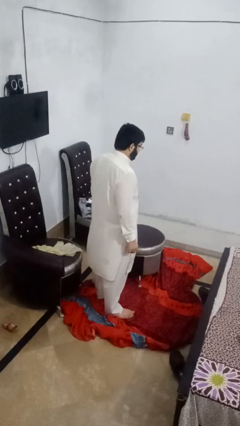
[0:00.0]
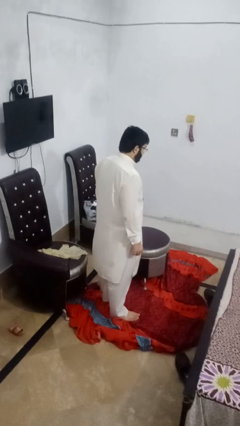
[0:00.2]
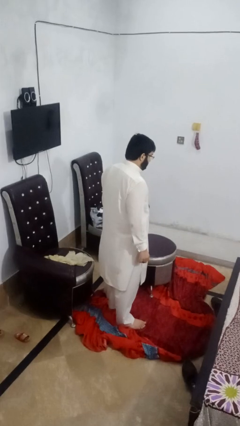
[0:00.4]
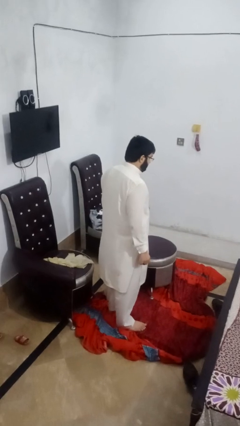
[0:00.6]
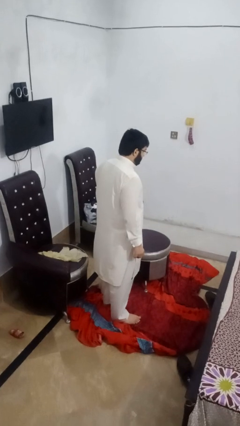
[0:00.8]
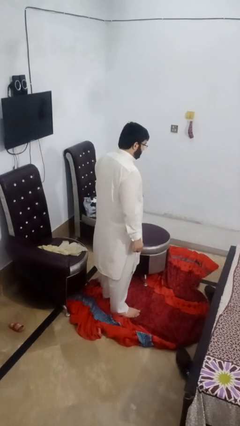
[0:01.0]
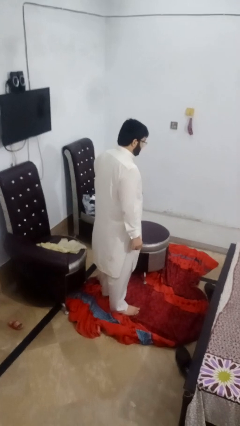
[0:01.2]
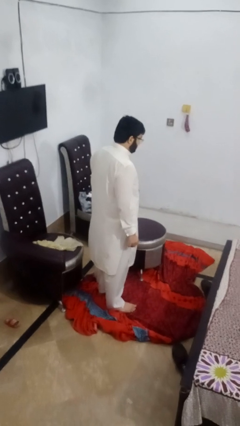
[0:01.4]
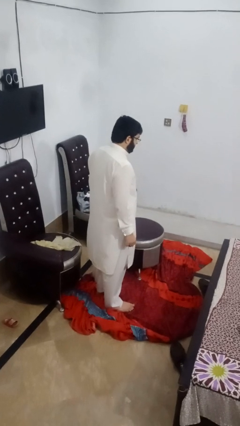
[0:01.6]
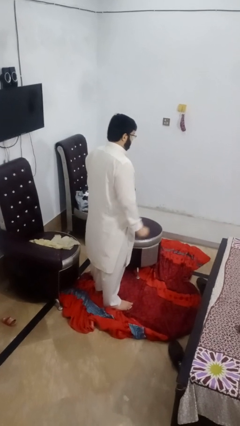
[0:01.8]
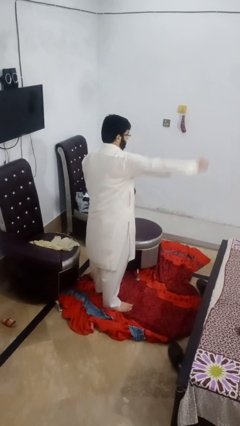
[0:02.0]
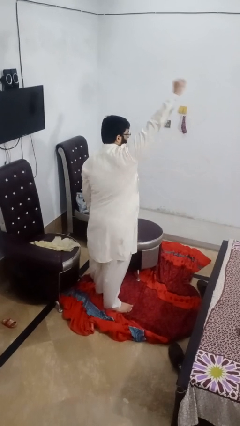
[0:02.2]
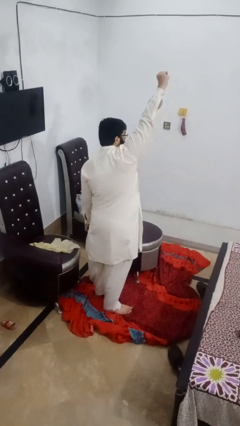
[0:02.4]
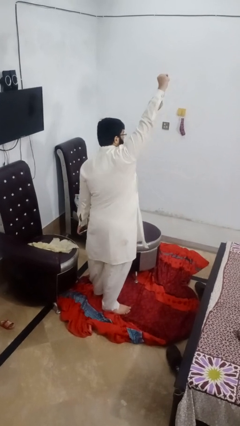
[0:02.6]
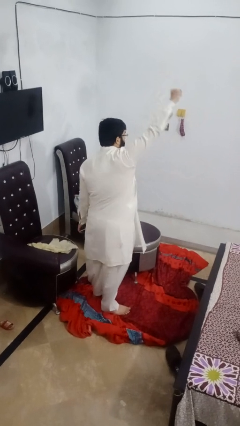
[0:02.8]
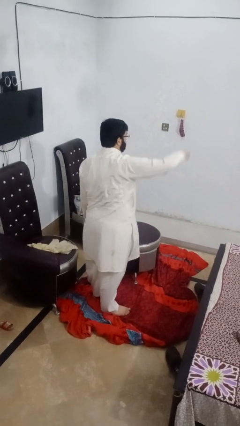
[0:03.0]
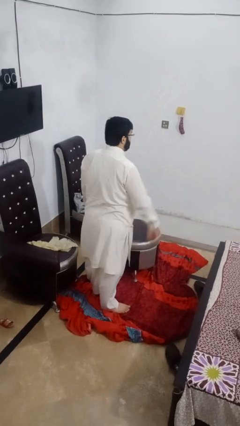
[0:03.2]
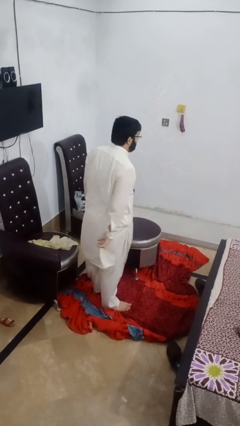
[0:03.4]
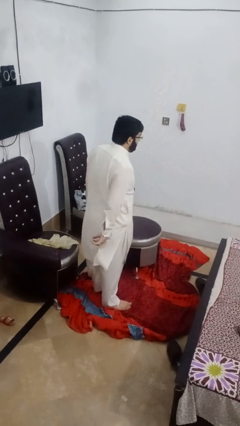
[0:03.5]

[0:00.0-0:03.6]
person punches

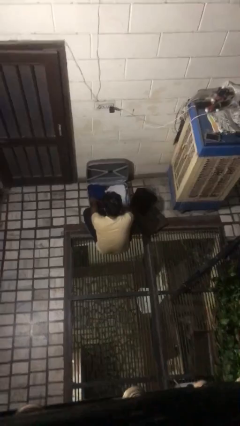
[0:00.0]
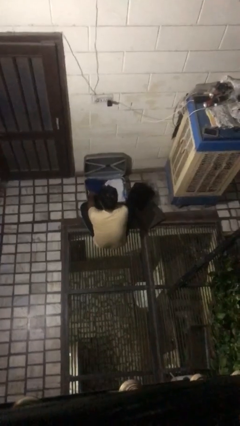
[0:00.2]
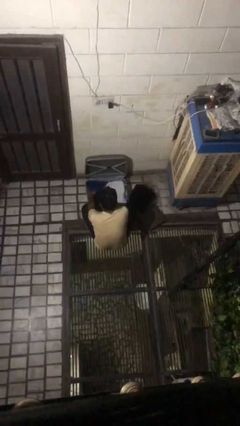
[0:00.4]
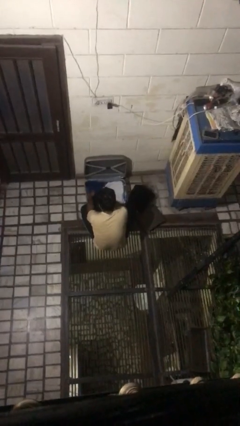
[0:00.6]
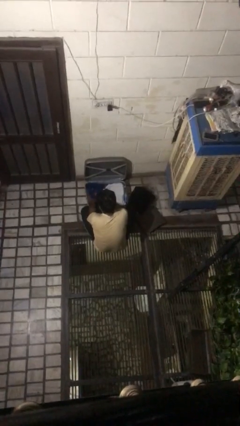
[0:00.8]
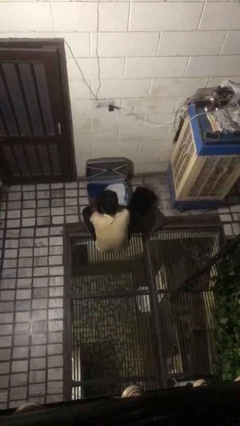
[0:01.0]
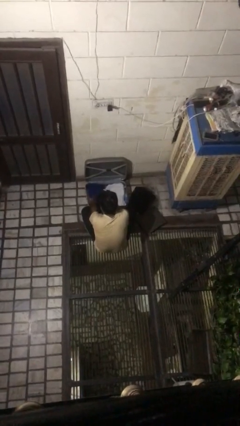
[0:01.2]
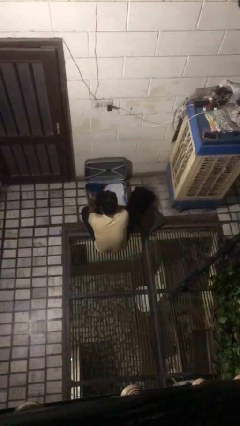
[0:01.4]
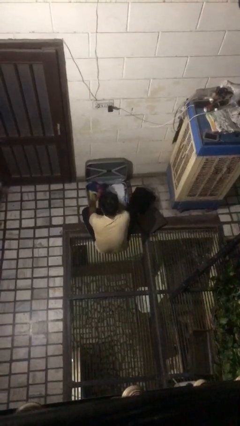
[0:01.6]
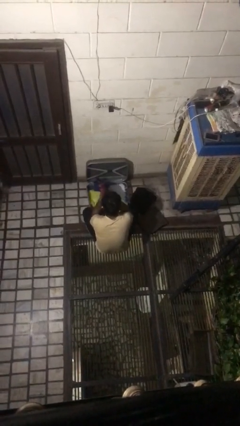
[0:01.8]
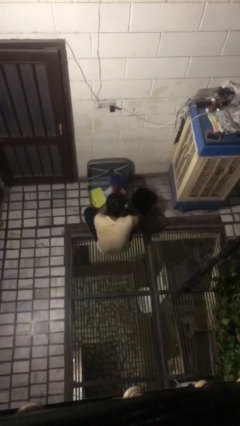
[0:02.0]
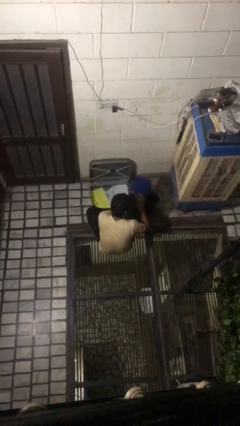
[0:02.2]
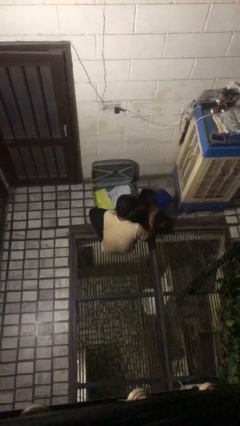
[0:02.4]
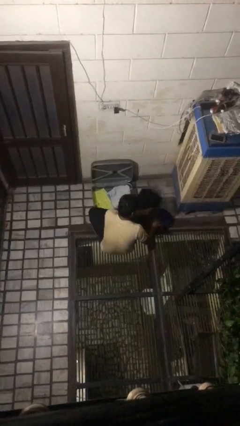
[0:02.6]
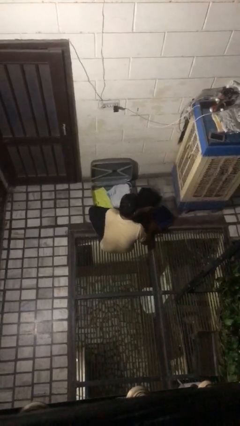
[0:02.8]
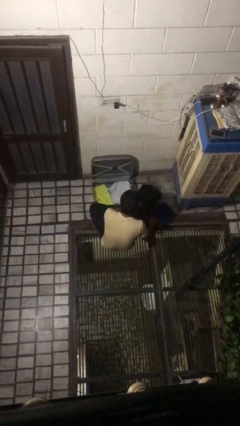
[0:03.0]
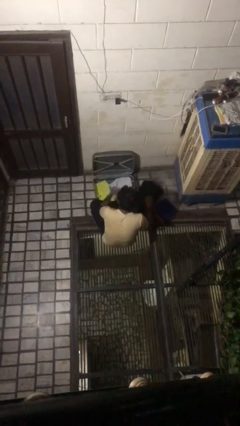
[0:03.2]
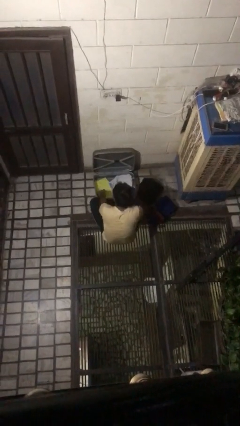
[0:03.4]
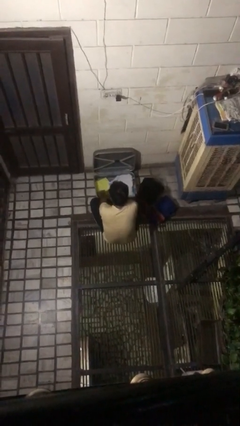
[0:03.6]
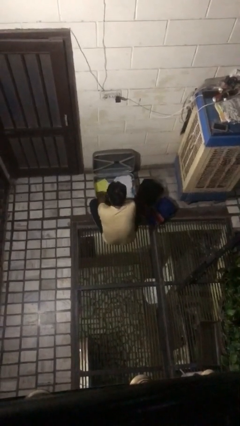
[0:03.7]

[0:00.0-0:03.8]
person unloads clothes from suitcase

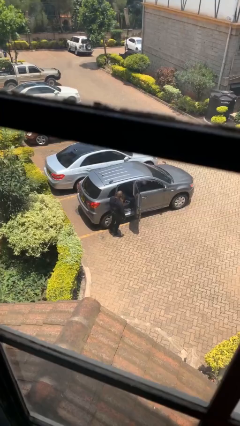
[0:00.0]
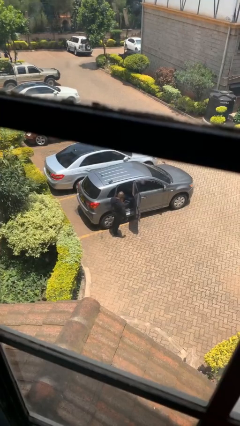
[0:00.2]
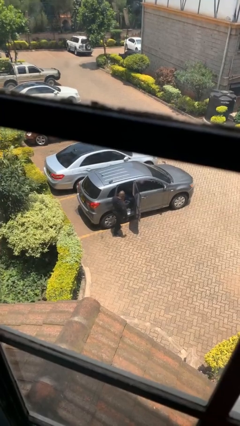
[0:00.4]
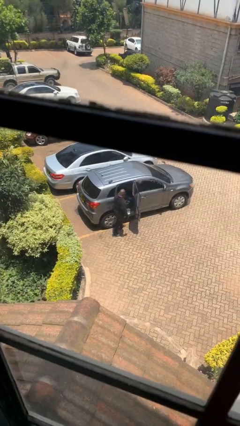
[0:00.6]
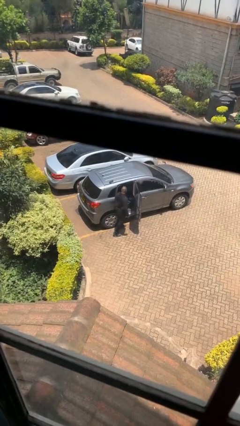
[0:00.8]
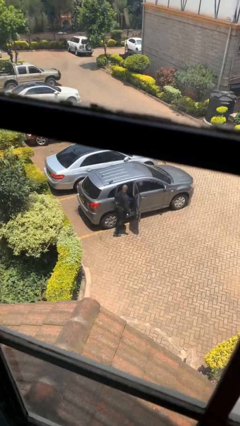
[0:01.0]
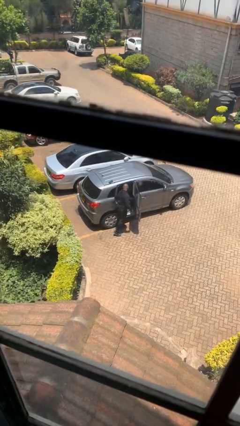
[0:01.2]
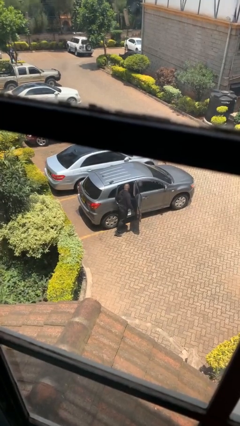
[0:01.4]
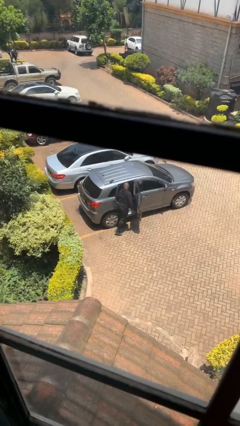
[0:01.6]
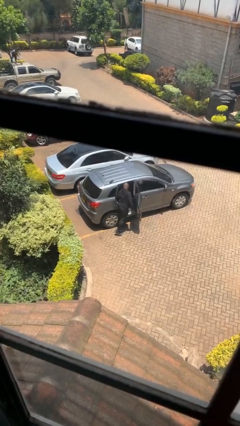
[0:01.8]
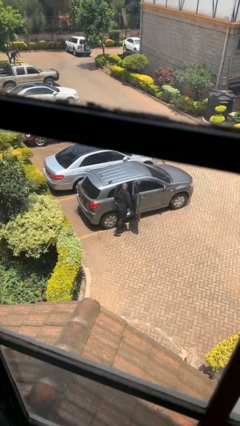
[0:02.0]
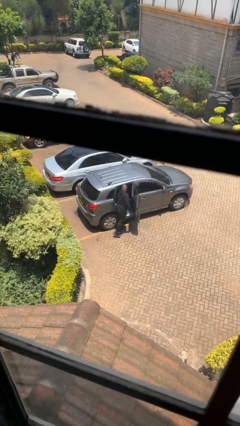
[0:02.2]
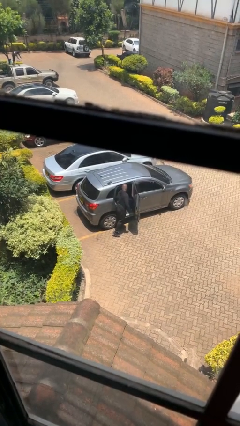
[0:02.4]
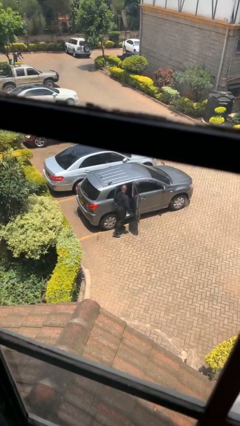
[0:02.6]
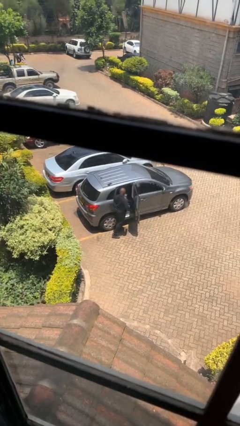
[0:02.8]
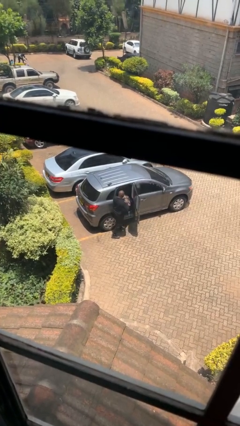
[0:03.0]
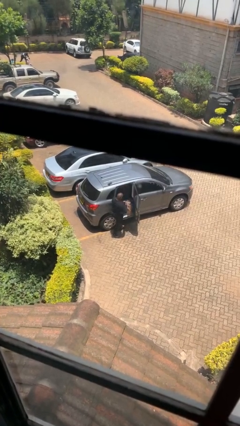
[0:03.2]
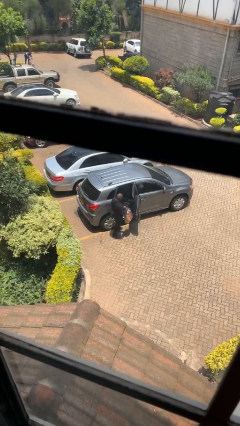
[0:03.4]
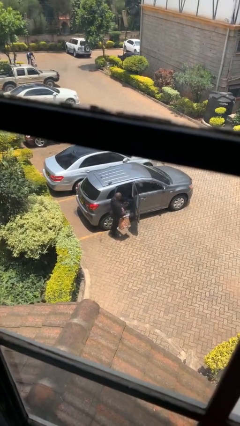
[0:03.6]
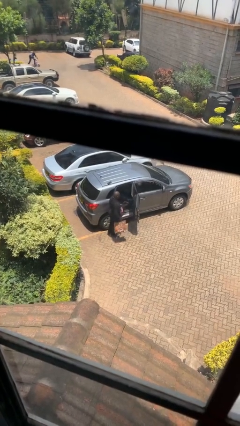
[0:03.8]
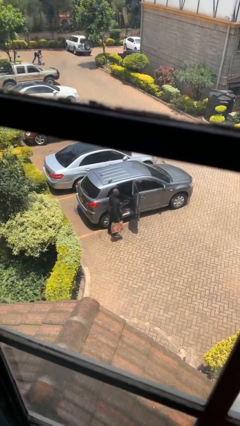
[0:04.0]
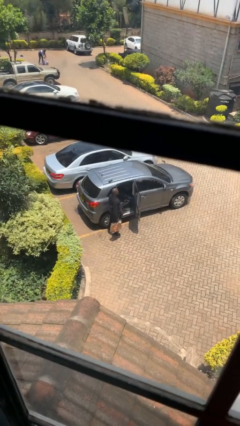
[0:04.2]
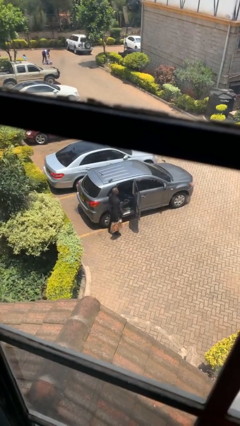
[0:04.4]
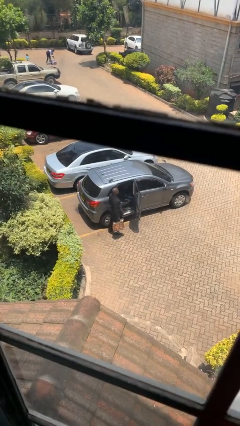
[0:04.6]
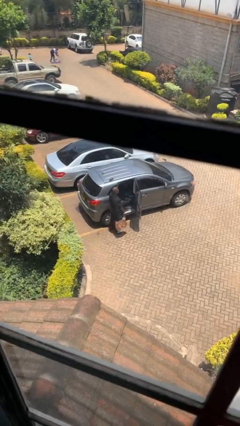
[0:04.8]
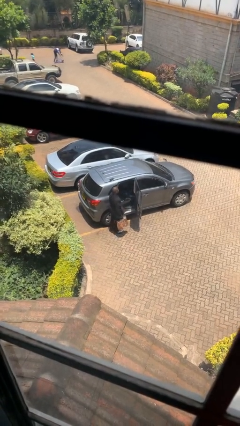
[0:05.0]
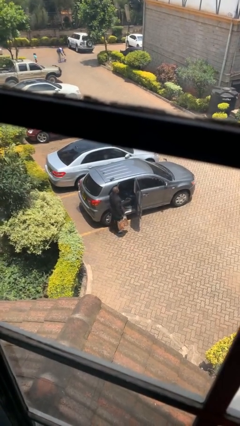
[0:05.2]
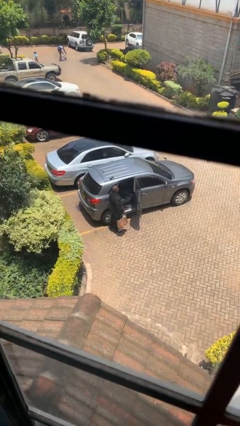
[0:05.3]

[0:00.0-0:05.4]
person unloads car

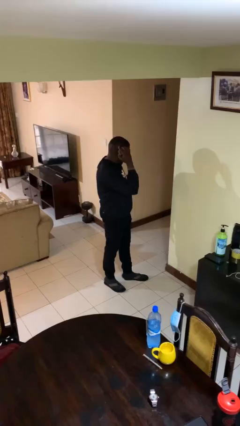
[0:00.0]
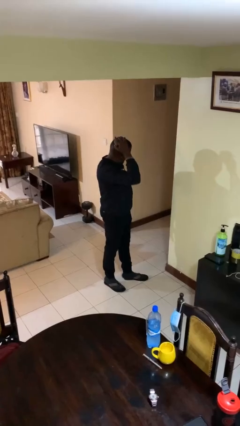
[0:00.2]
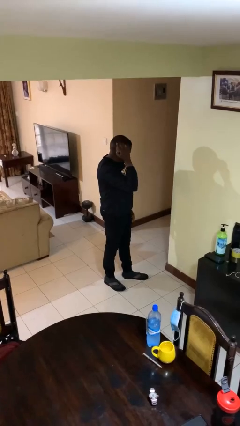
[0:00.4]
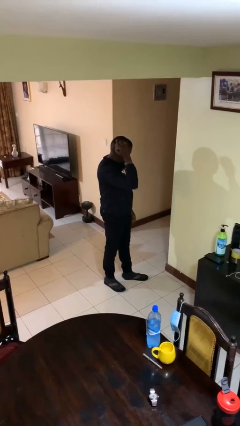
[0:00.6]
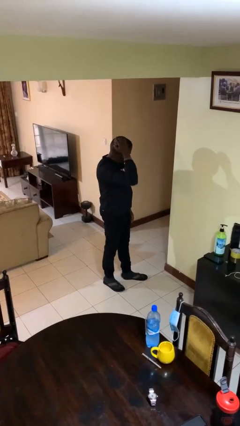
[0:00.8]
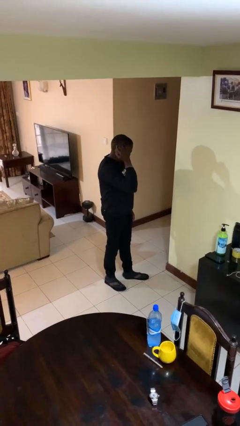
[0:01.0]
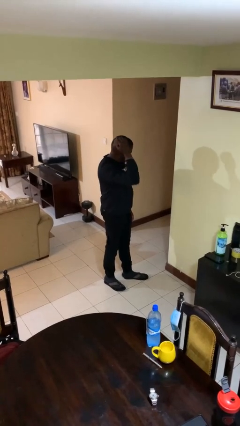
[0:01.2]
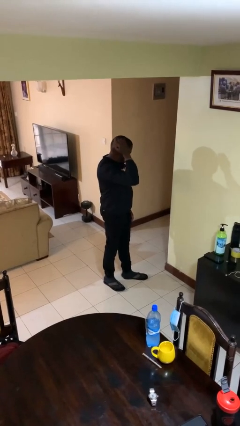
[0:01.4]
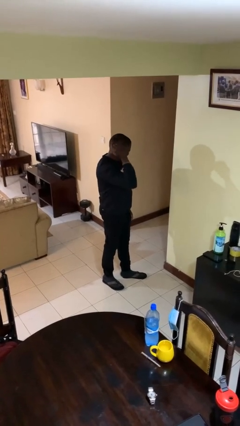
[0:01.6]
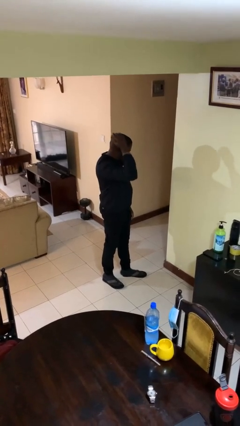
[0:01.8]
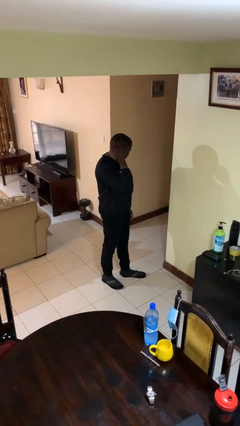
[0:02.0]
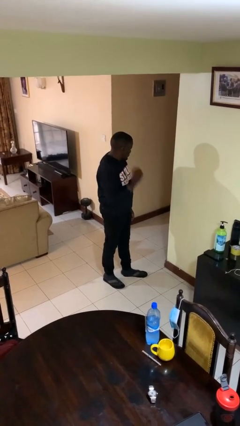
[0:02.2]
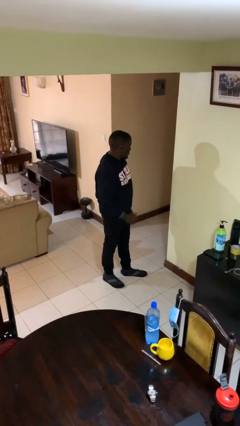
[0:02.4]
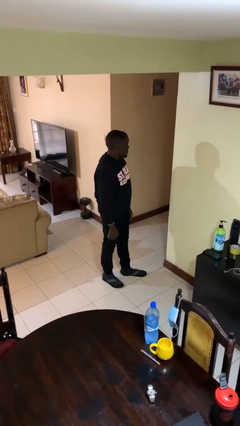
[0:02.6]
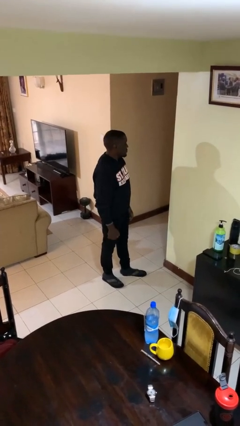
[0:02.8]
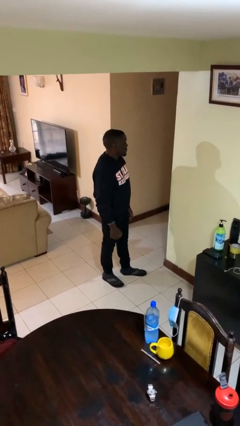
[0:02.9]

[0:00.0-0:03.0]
person brushes hair

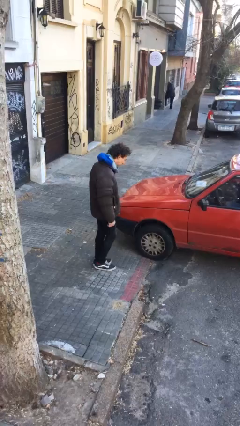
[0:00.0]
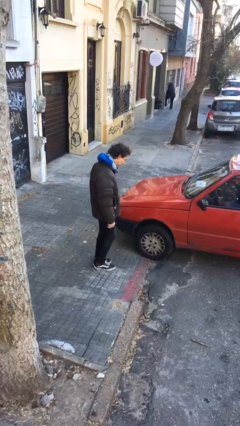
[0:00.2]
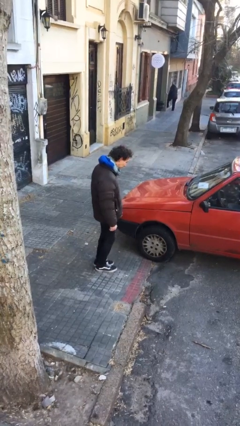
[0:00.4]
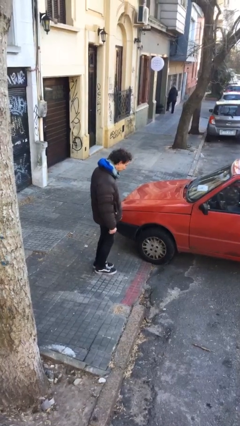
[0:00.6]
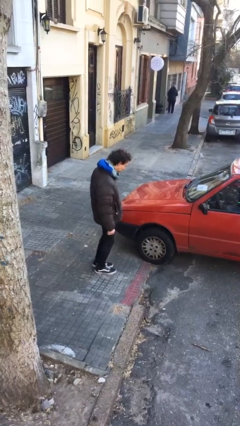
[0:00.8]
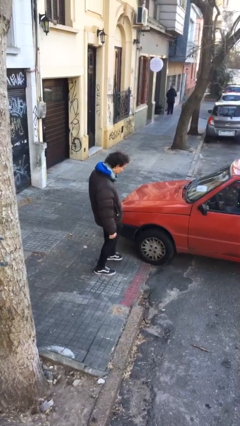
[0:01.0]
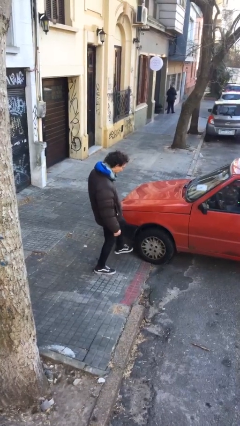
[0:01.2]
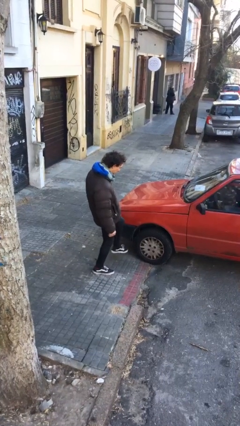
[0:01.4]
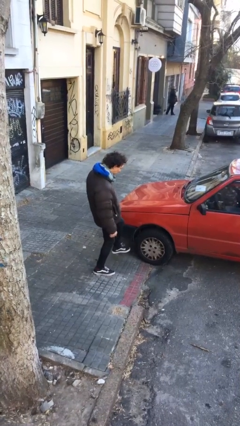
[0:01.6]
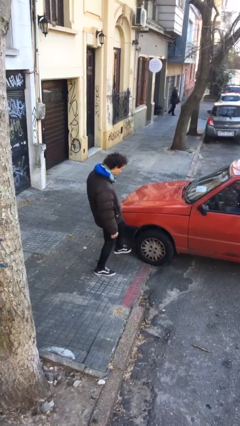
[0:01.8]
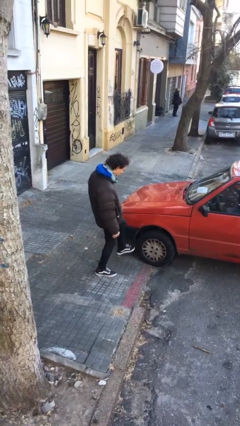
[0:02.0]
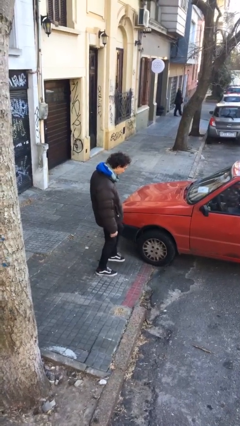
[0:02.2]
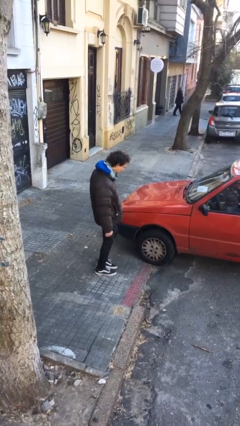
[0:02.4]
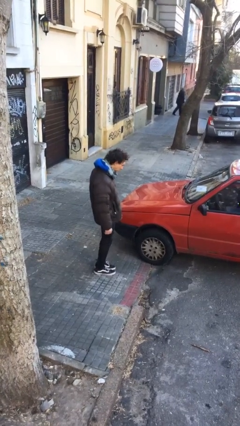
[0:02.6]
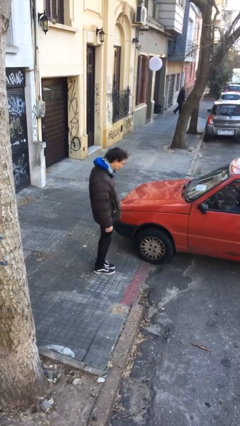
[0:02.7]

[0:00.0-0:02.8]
person kicks car tires
